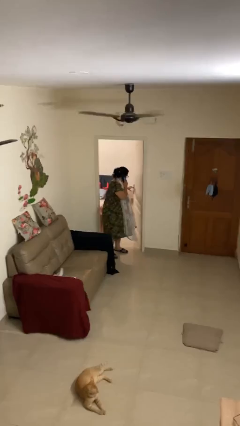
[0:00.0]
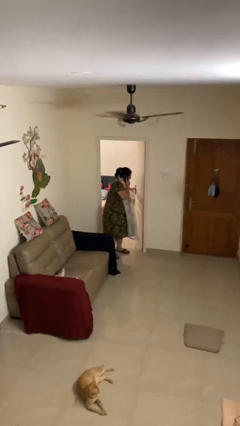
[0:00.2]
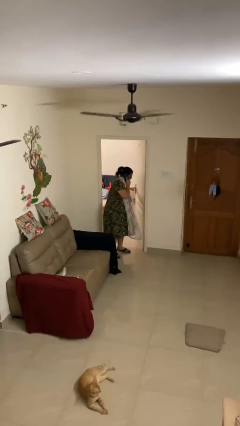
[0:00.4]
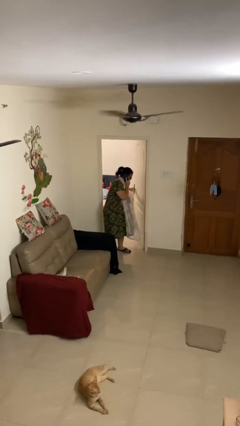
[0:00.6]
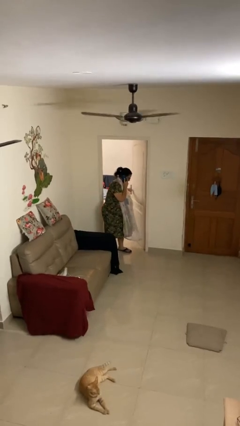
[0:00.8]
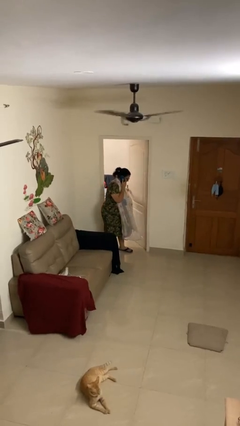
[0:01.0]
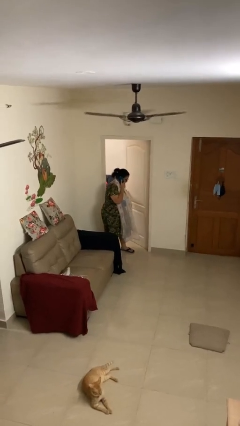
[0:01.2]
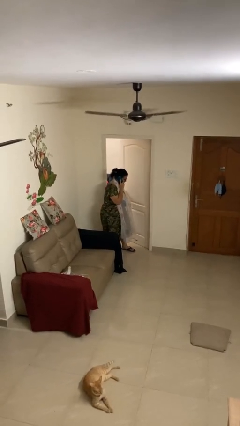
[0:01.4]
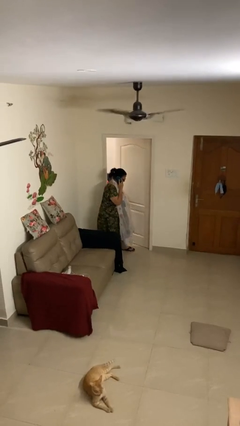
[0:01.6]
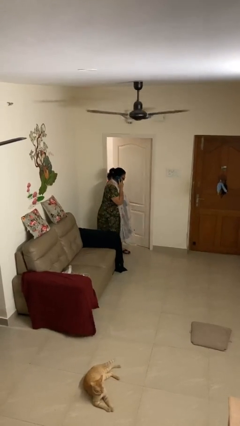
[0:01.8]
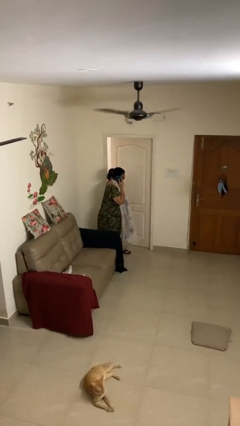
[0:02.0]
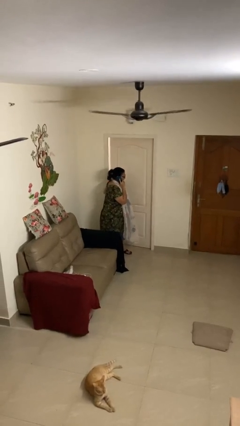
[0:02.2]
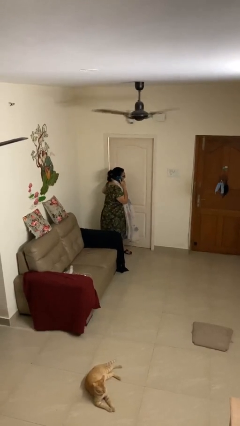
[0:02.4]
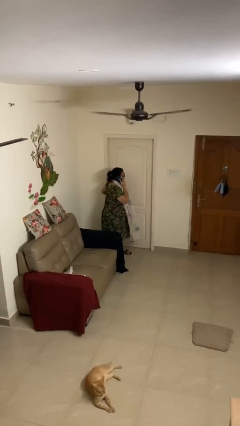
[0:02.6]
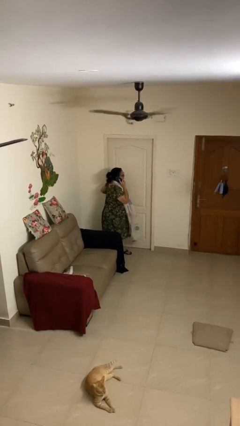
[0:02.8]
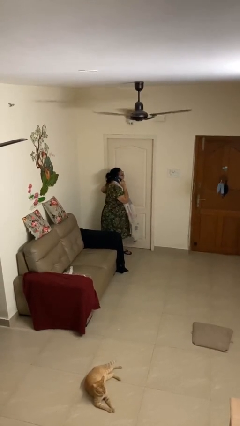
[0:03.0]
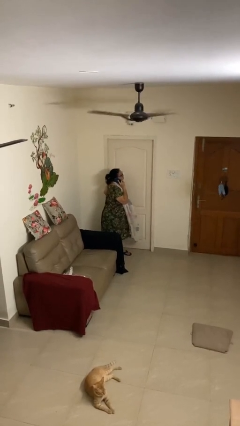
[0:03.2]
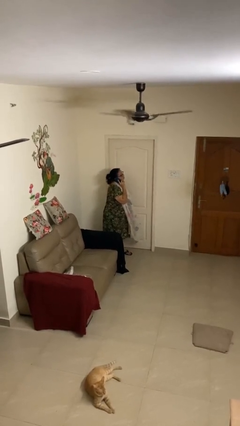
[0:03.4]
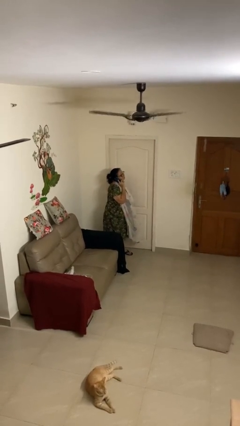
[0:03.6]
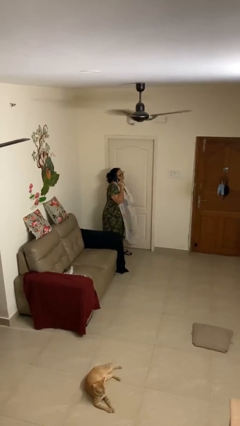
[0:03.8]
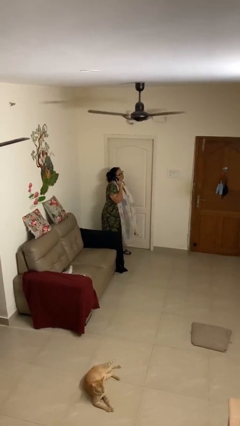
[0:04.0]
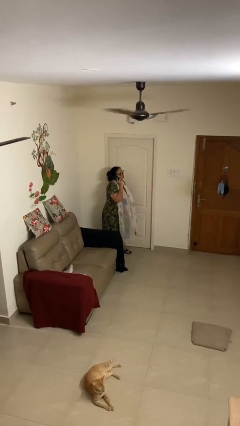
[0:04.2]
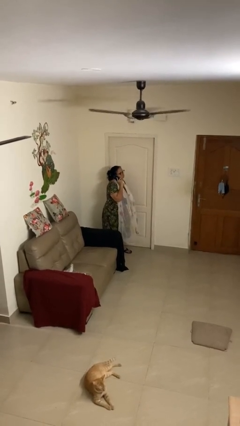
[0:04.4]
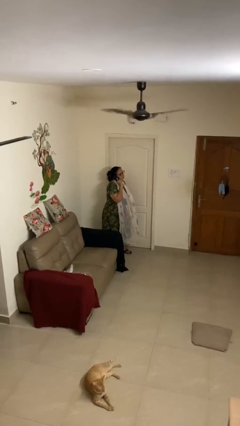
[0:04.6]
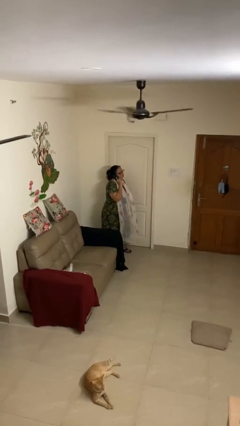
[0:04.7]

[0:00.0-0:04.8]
person closes facility door

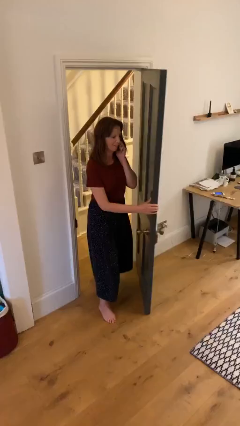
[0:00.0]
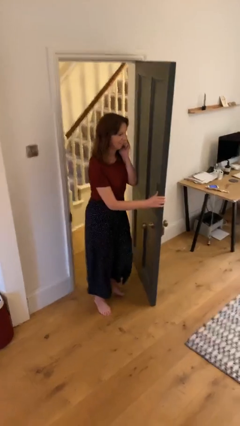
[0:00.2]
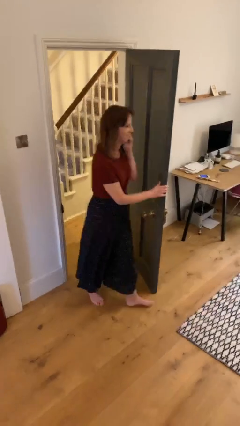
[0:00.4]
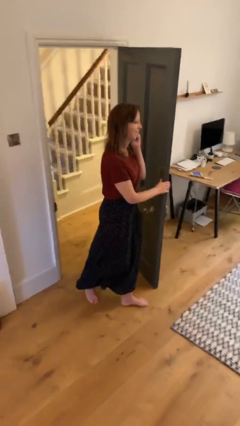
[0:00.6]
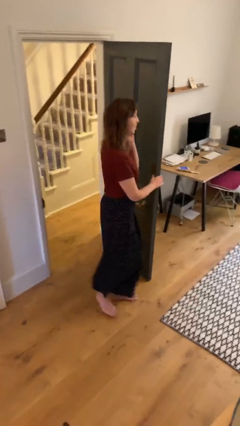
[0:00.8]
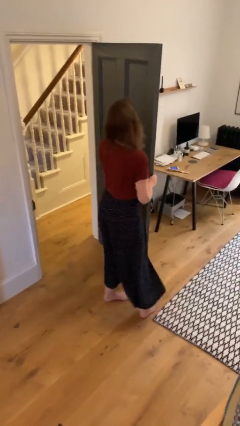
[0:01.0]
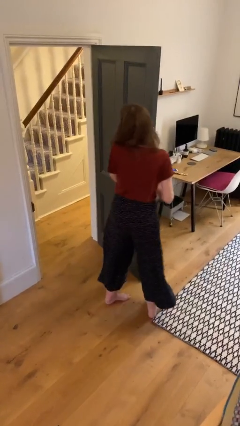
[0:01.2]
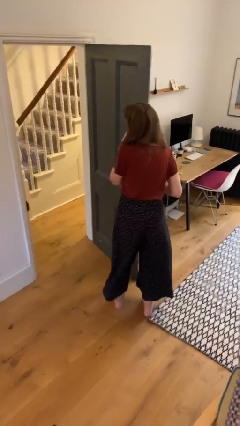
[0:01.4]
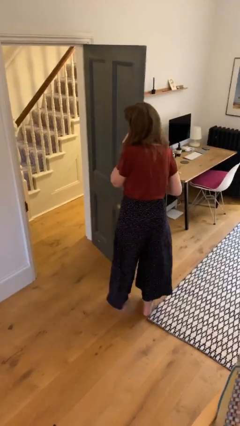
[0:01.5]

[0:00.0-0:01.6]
person enters scene through structure

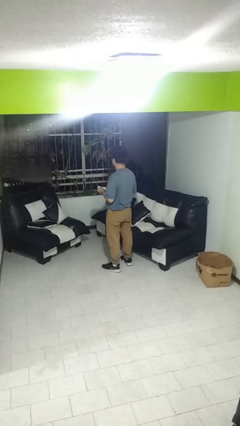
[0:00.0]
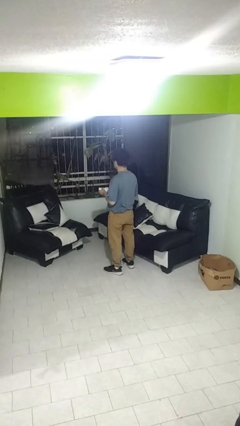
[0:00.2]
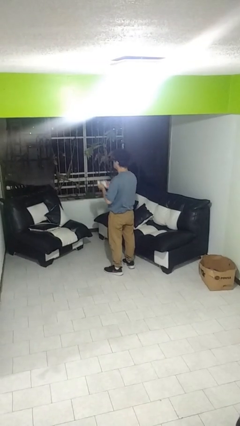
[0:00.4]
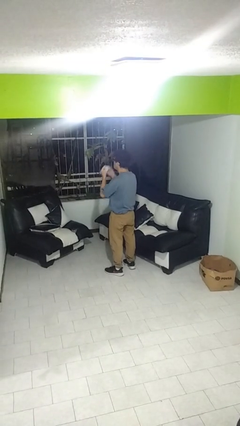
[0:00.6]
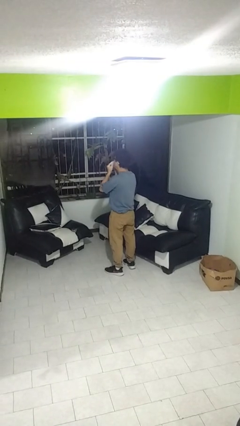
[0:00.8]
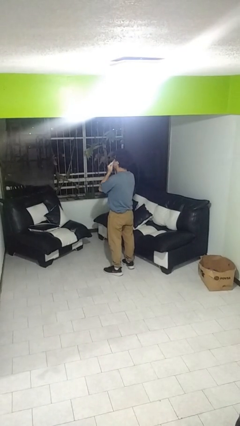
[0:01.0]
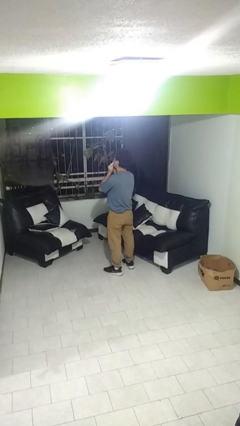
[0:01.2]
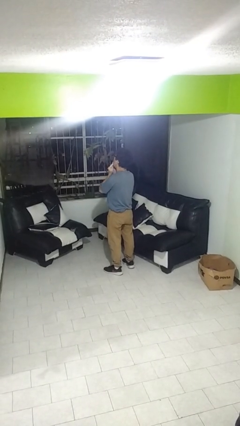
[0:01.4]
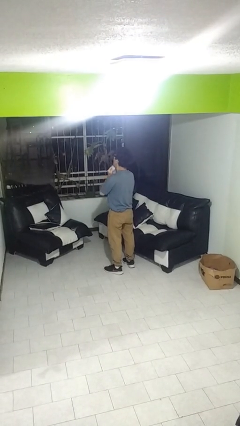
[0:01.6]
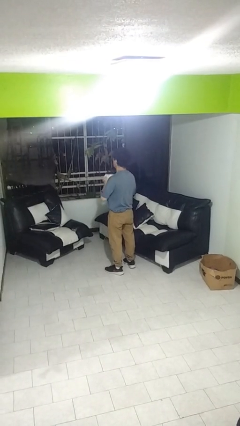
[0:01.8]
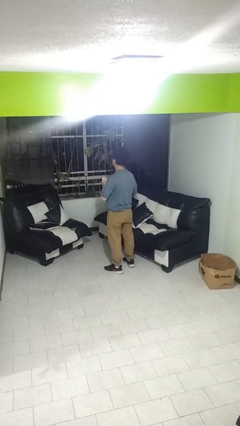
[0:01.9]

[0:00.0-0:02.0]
person wipes mouth with napkin

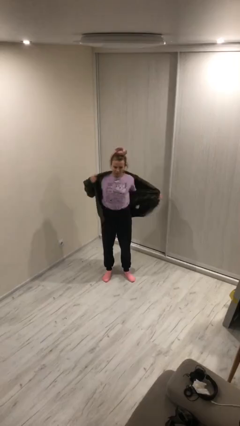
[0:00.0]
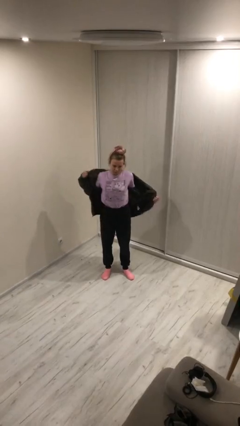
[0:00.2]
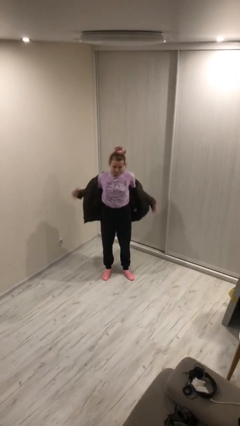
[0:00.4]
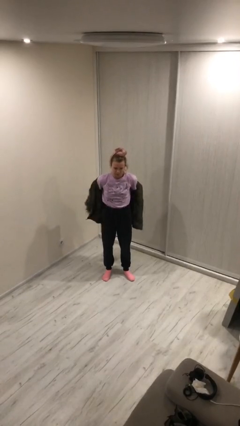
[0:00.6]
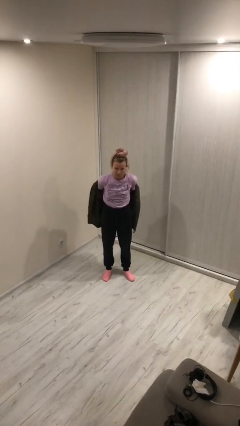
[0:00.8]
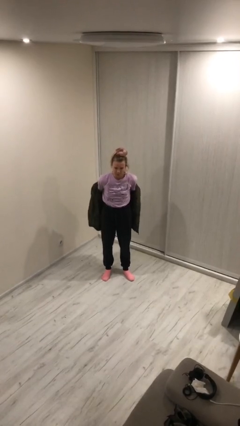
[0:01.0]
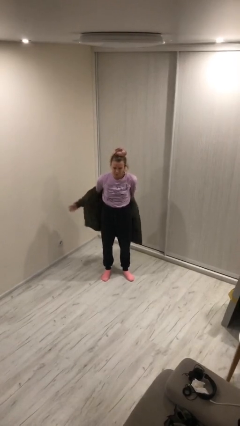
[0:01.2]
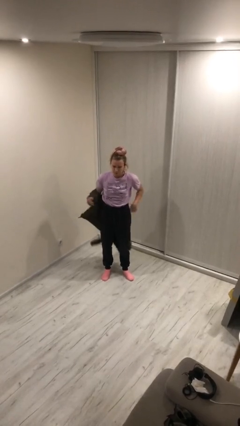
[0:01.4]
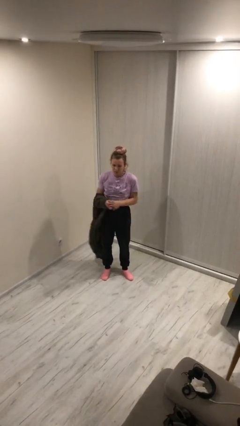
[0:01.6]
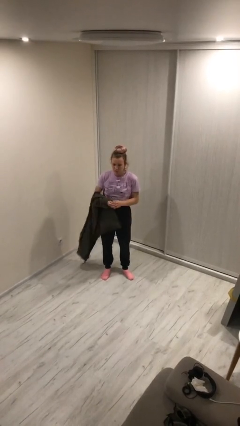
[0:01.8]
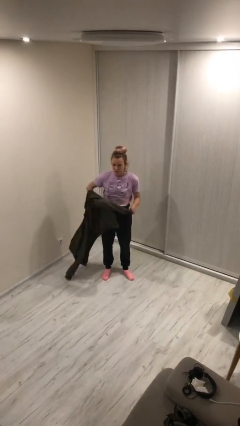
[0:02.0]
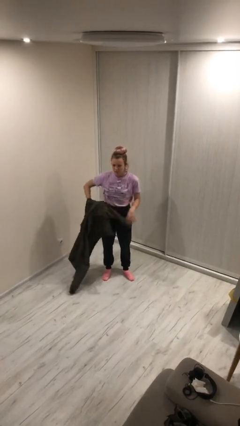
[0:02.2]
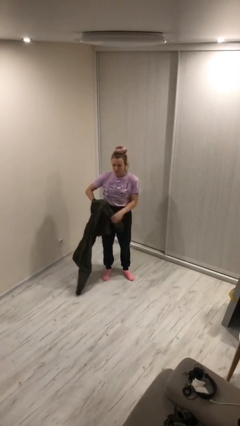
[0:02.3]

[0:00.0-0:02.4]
person takes off jacket

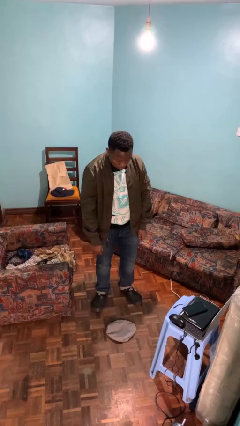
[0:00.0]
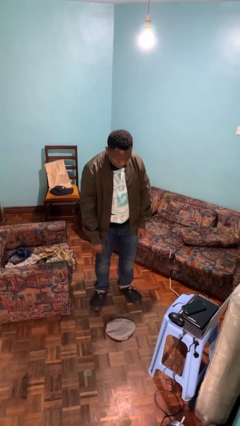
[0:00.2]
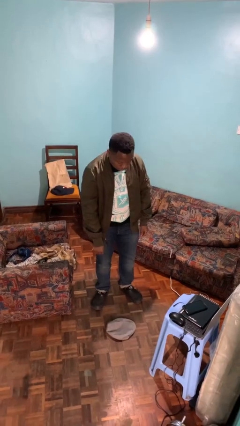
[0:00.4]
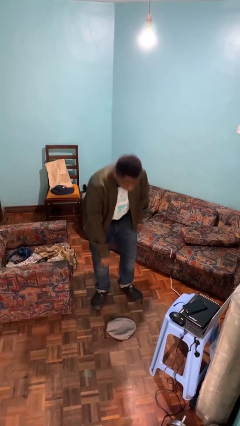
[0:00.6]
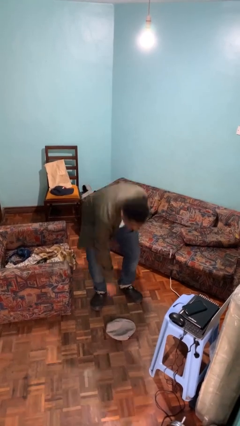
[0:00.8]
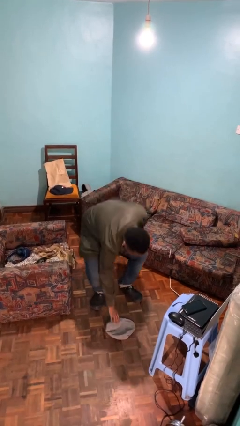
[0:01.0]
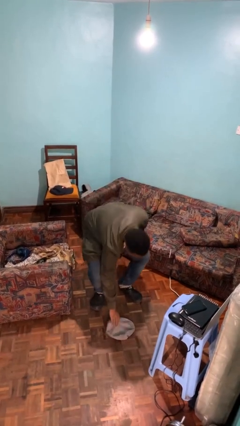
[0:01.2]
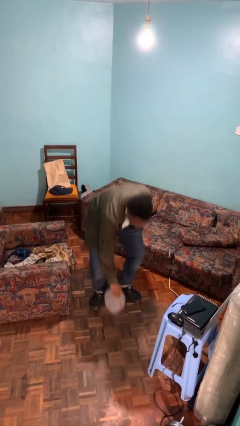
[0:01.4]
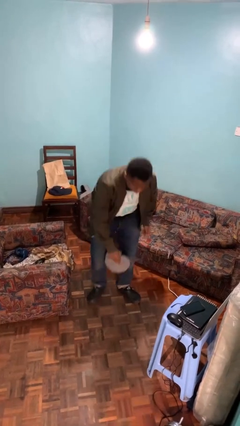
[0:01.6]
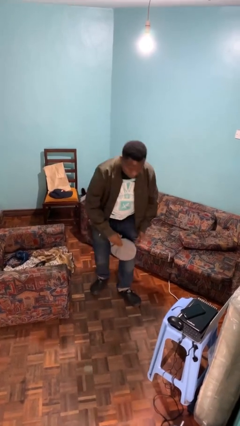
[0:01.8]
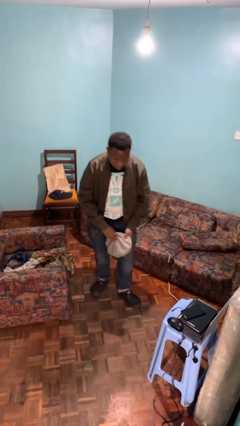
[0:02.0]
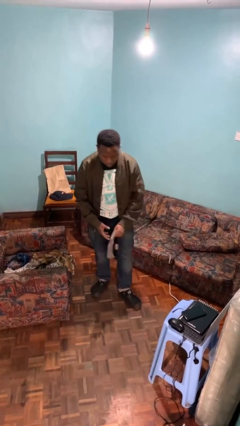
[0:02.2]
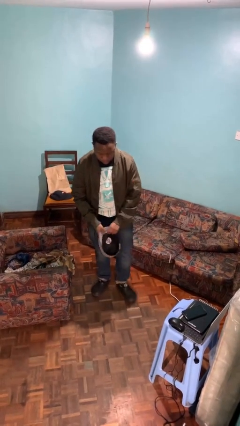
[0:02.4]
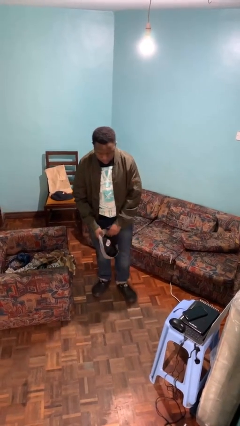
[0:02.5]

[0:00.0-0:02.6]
person picks up object from floor

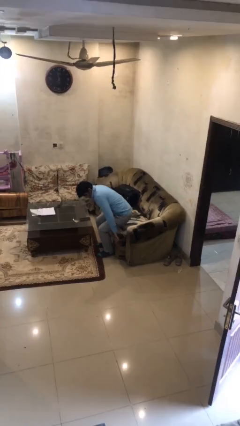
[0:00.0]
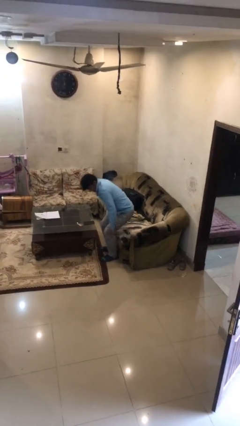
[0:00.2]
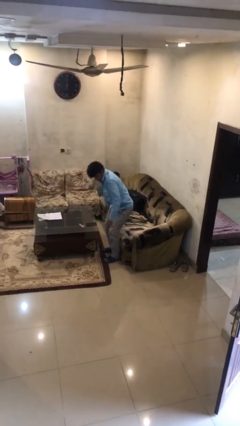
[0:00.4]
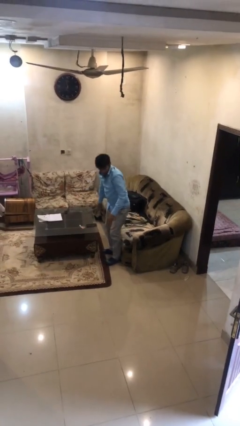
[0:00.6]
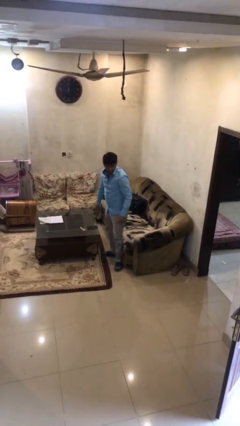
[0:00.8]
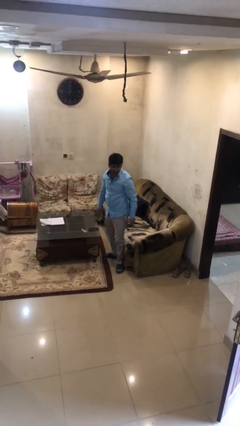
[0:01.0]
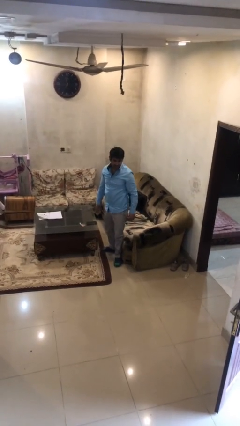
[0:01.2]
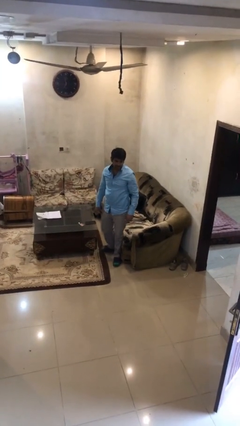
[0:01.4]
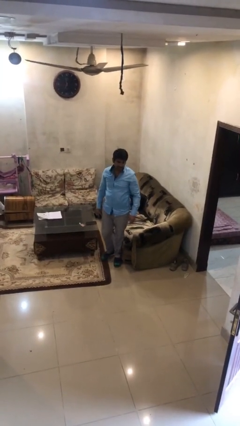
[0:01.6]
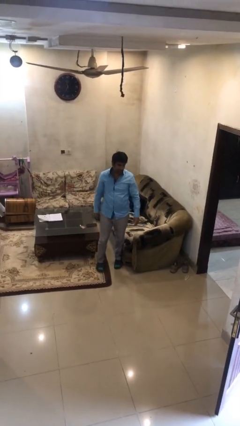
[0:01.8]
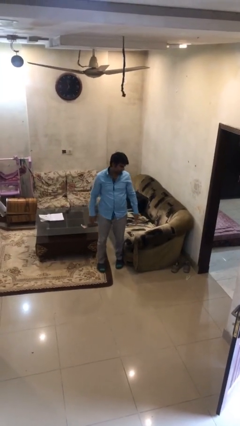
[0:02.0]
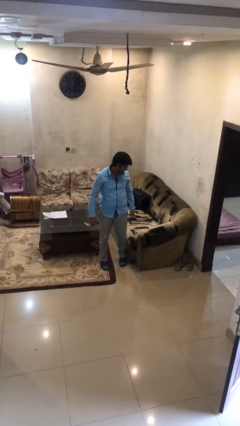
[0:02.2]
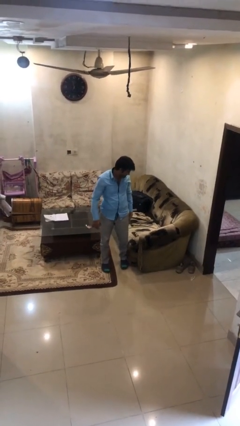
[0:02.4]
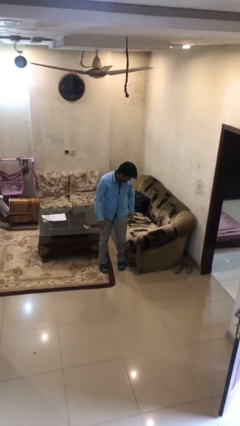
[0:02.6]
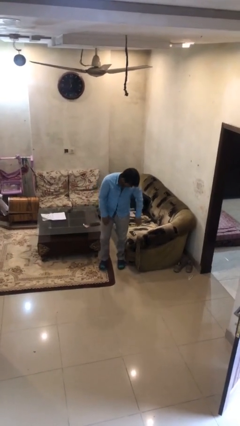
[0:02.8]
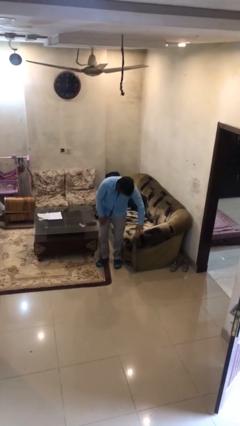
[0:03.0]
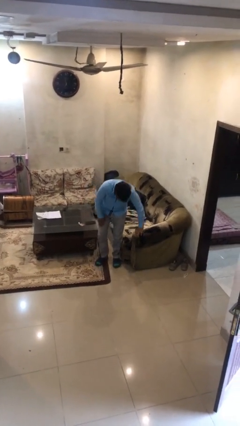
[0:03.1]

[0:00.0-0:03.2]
person stands up

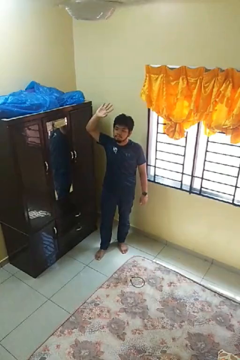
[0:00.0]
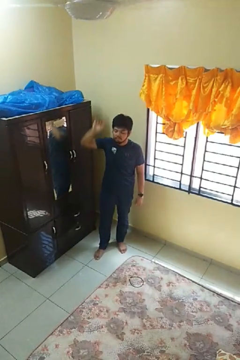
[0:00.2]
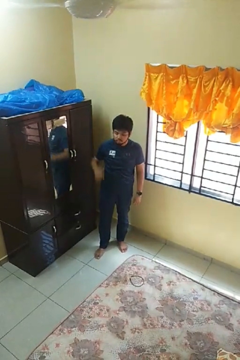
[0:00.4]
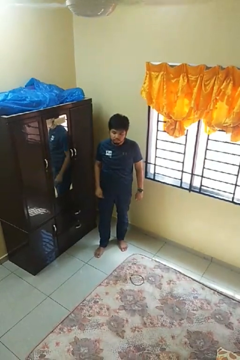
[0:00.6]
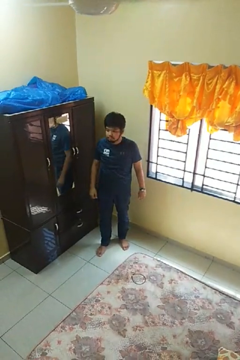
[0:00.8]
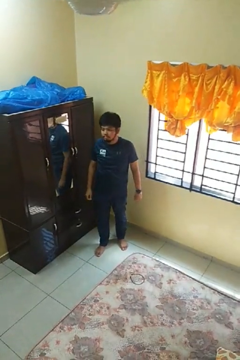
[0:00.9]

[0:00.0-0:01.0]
person gestures lower hand
